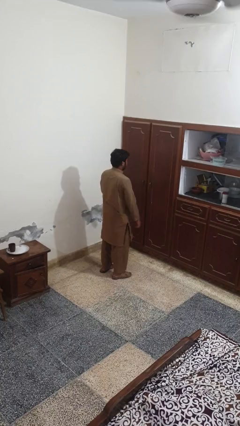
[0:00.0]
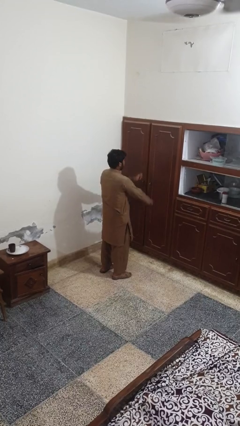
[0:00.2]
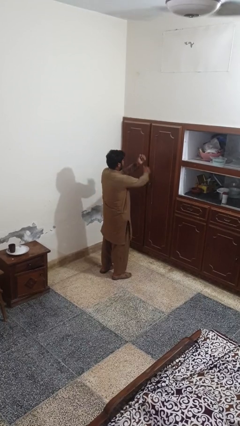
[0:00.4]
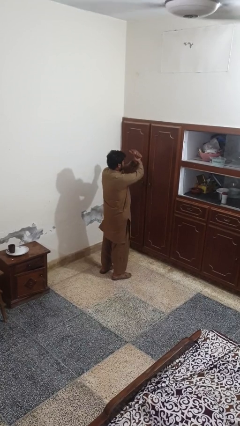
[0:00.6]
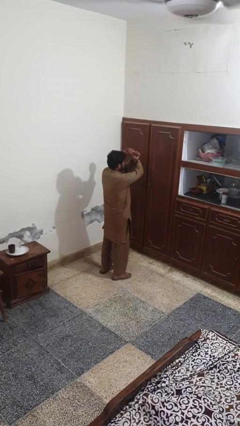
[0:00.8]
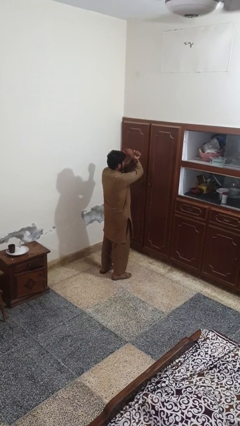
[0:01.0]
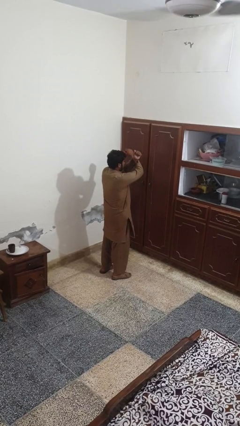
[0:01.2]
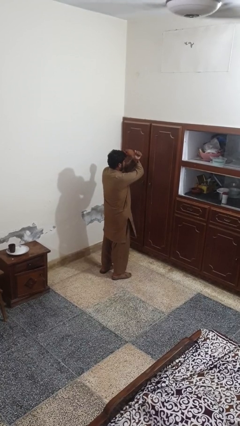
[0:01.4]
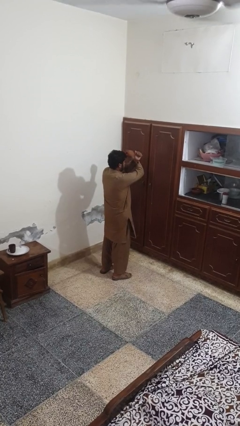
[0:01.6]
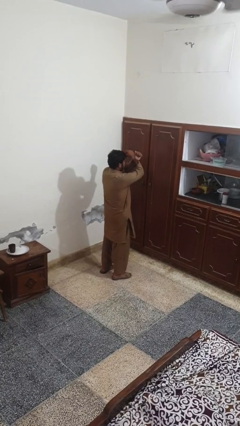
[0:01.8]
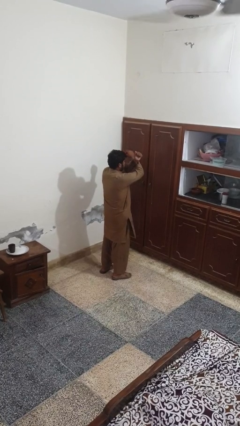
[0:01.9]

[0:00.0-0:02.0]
person gestures arms x

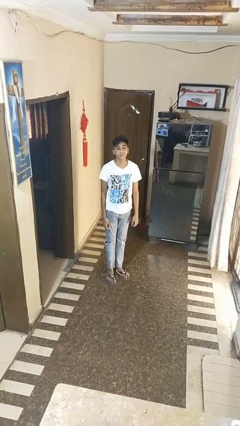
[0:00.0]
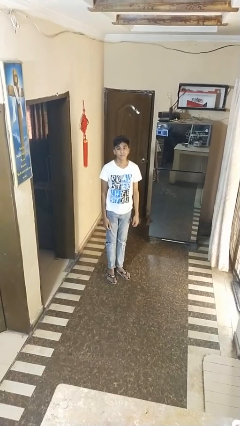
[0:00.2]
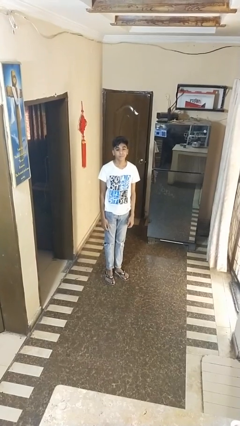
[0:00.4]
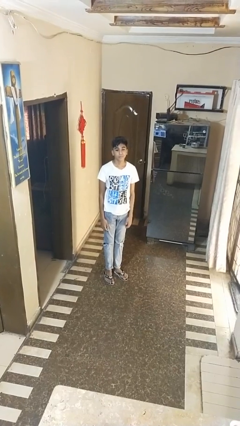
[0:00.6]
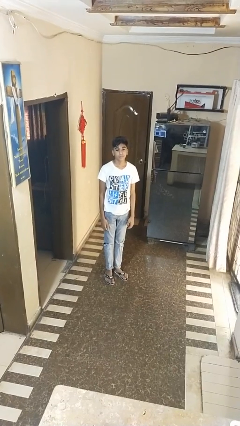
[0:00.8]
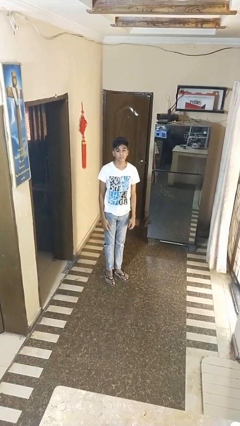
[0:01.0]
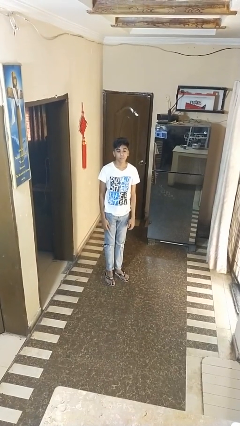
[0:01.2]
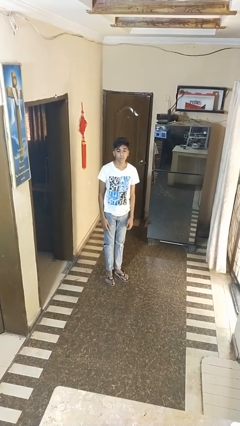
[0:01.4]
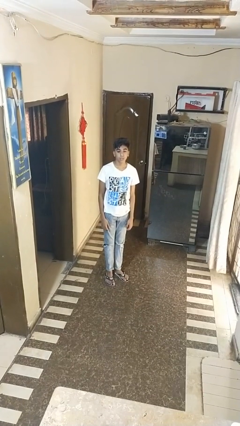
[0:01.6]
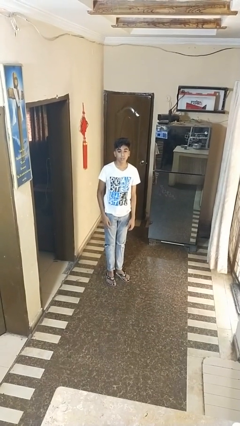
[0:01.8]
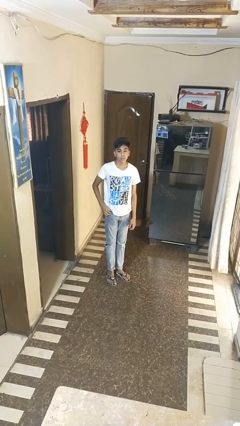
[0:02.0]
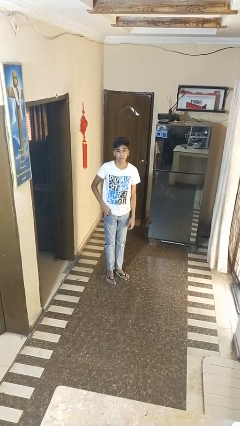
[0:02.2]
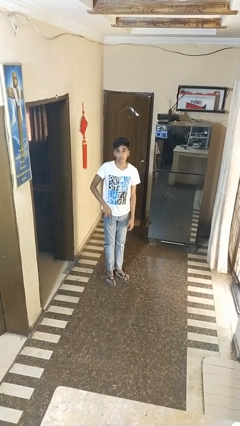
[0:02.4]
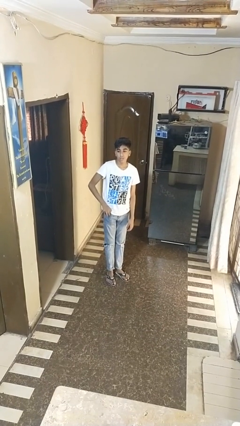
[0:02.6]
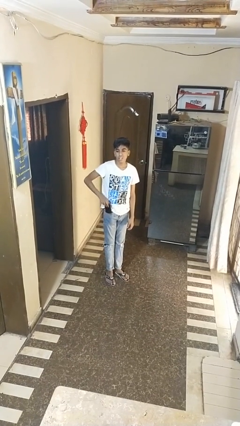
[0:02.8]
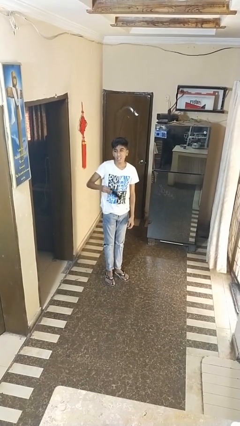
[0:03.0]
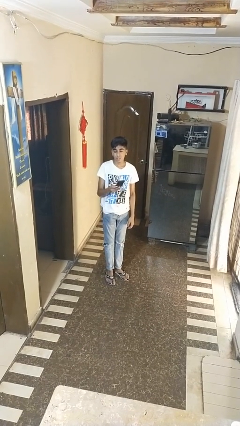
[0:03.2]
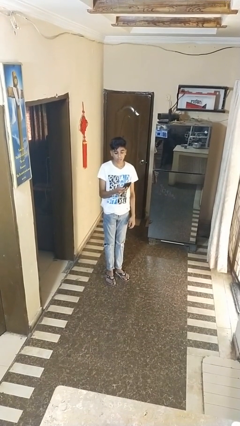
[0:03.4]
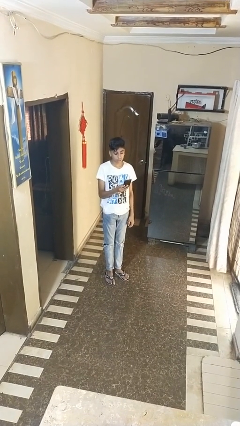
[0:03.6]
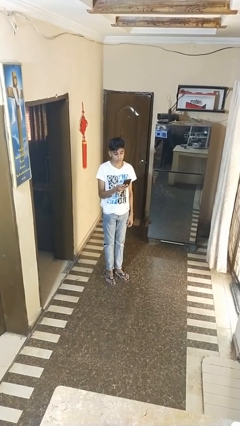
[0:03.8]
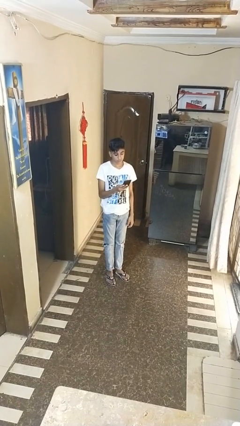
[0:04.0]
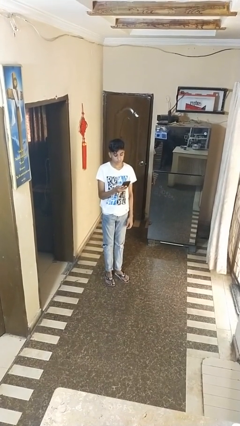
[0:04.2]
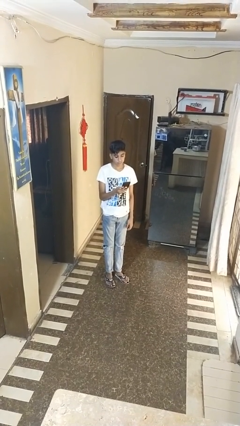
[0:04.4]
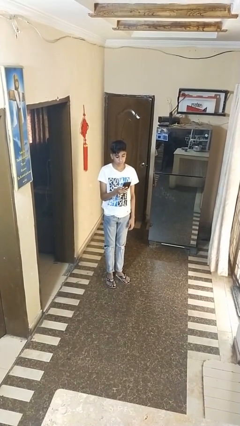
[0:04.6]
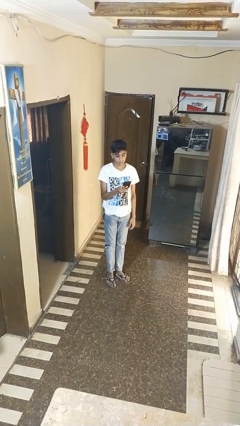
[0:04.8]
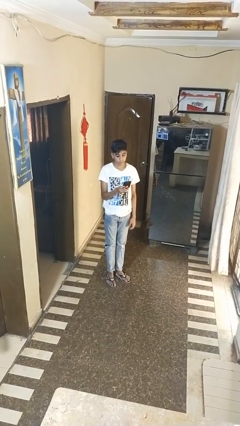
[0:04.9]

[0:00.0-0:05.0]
person takes phone from pocket

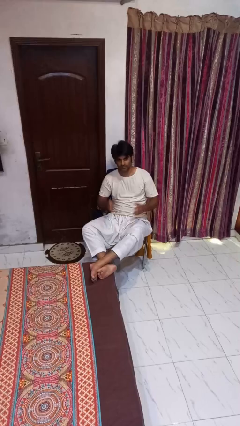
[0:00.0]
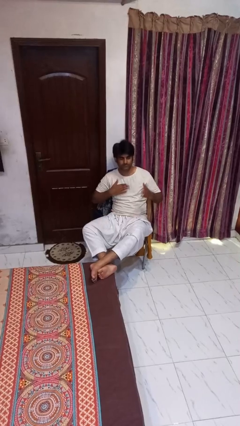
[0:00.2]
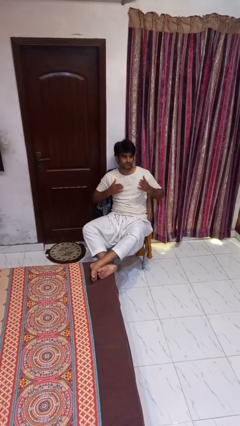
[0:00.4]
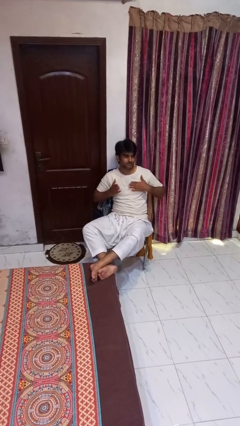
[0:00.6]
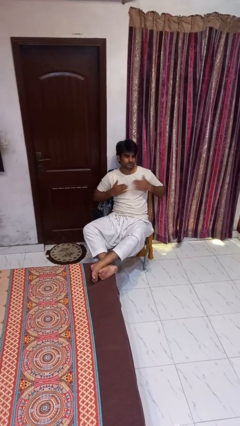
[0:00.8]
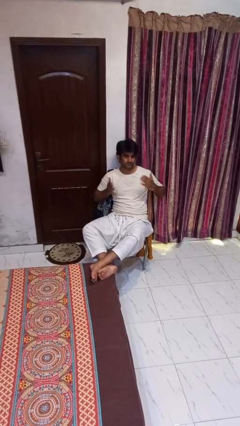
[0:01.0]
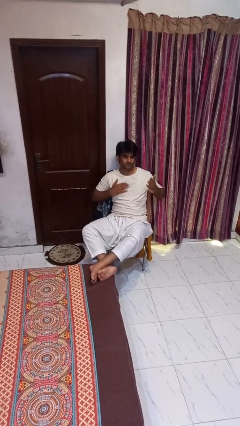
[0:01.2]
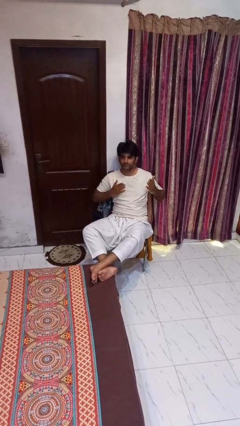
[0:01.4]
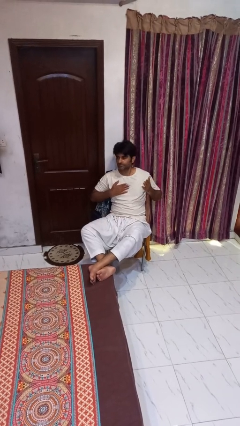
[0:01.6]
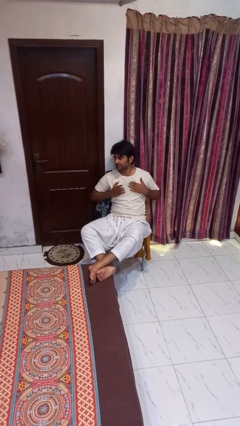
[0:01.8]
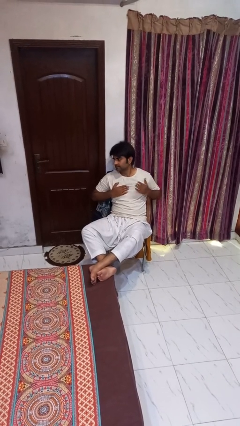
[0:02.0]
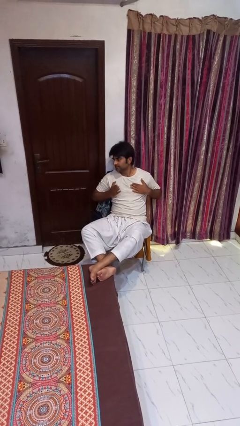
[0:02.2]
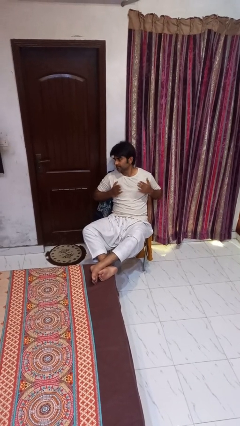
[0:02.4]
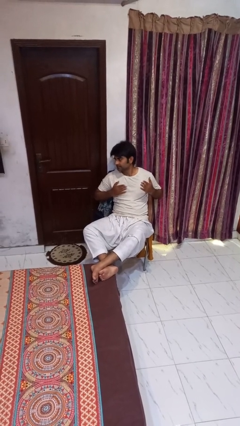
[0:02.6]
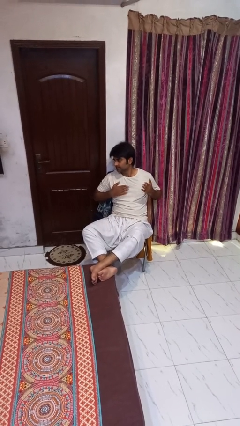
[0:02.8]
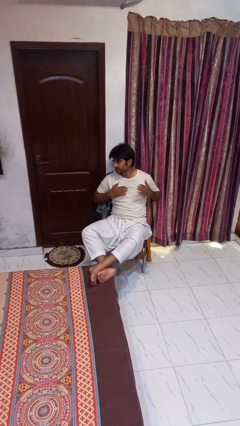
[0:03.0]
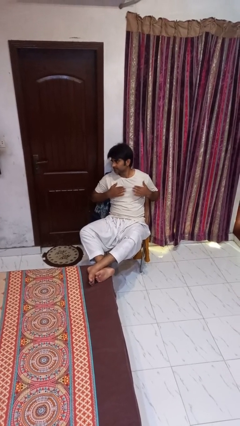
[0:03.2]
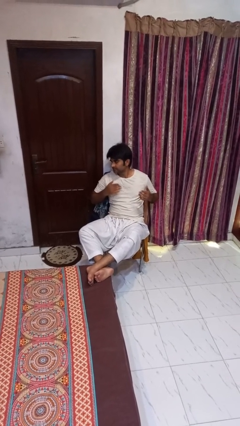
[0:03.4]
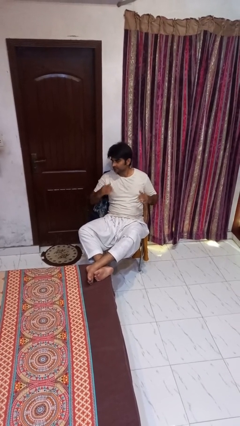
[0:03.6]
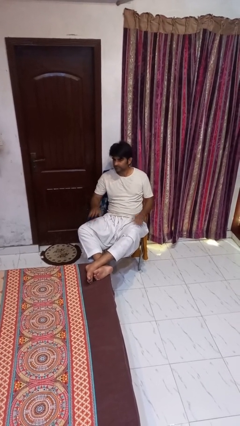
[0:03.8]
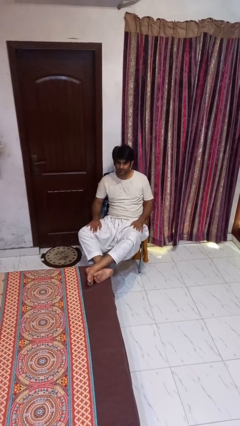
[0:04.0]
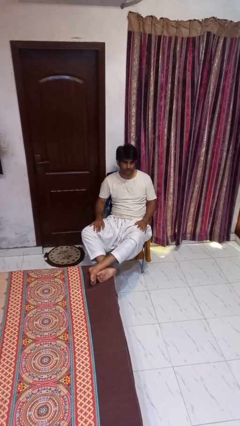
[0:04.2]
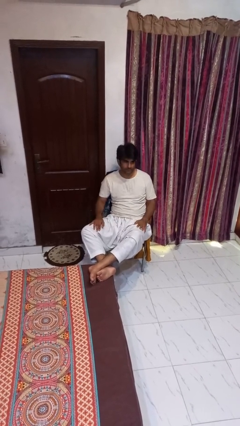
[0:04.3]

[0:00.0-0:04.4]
person drums on chest

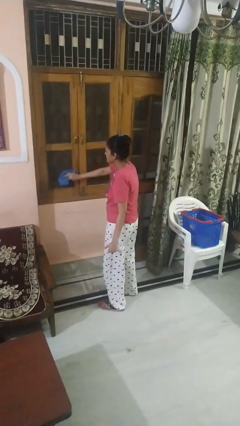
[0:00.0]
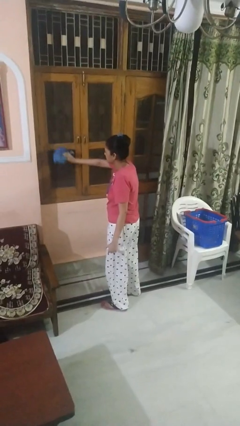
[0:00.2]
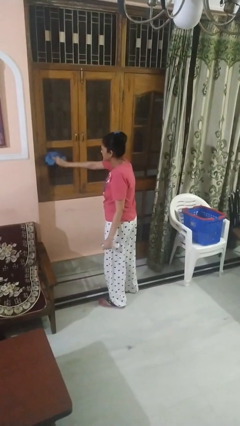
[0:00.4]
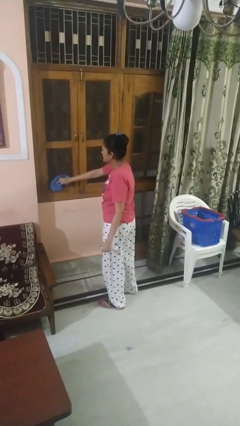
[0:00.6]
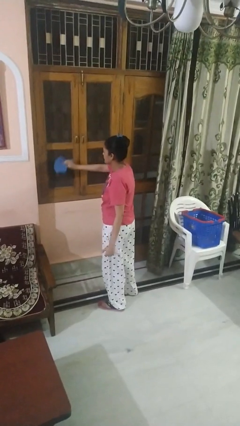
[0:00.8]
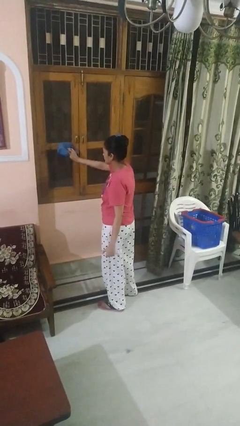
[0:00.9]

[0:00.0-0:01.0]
person washes window

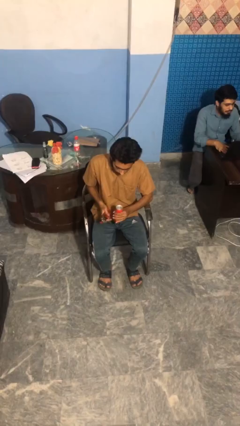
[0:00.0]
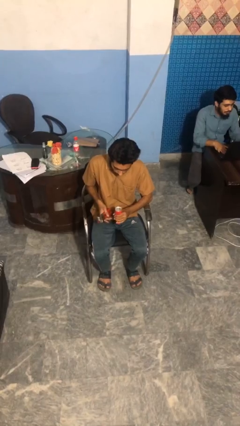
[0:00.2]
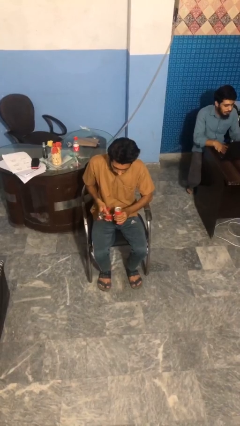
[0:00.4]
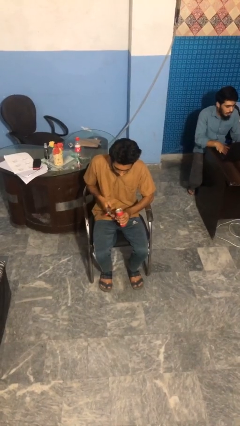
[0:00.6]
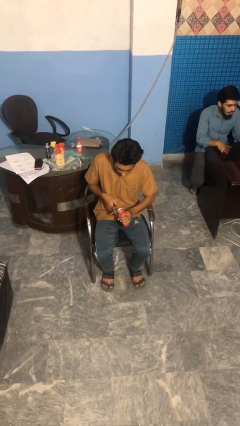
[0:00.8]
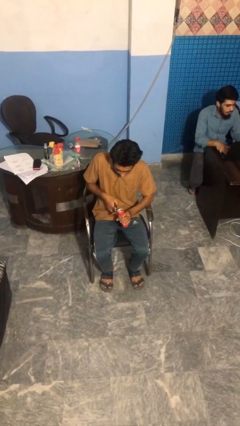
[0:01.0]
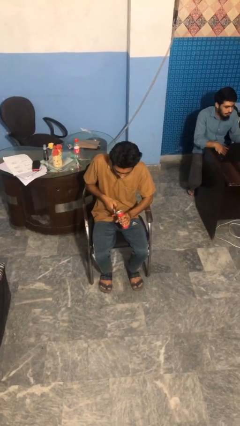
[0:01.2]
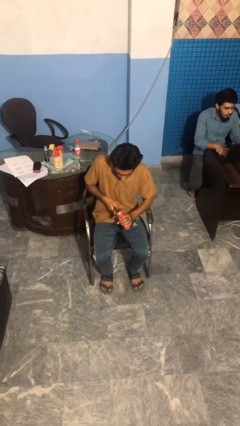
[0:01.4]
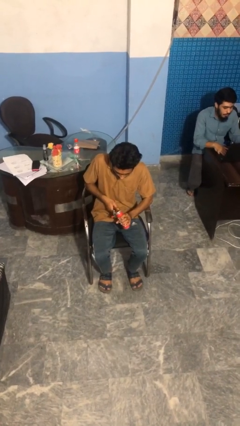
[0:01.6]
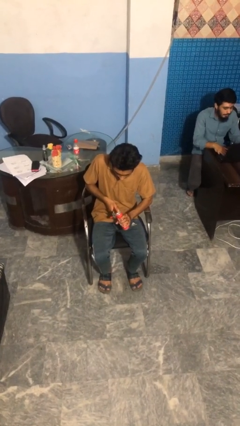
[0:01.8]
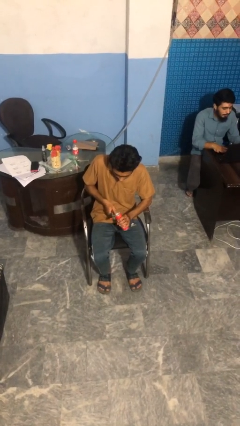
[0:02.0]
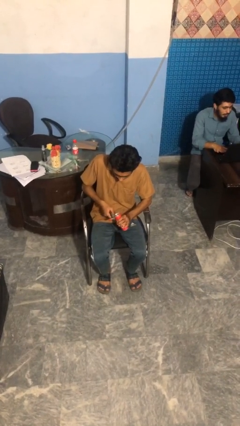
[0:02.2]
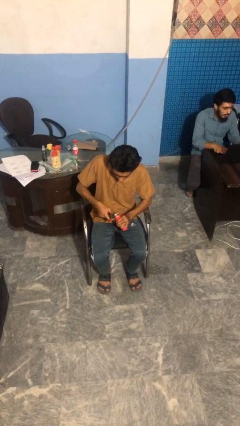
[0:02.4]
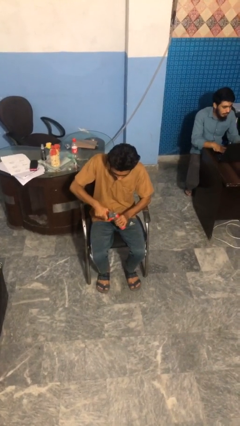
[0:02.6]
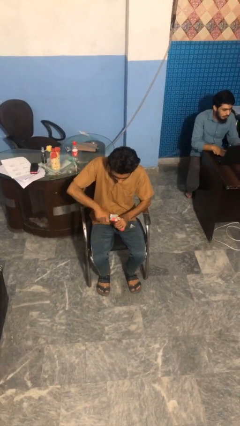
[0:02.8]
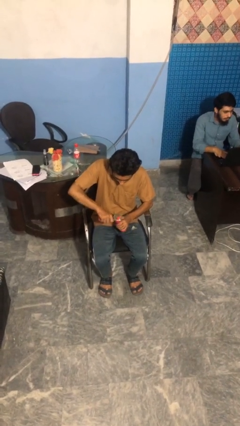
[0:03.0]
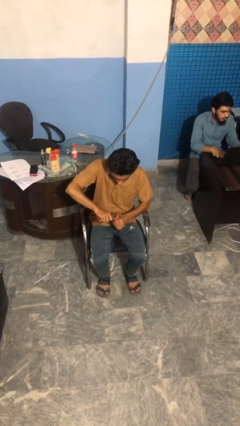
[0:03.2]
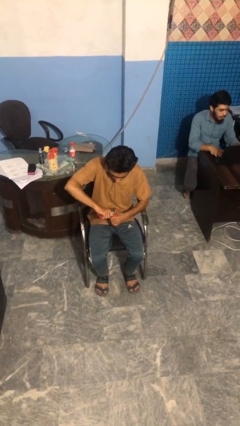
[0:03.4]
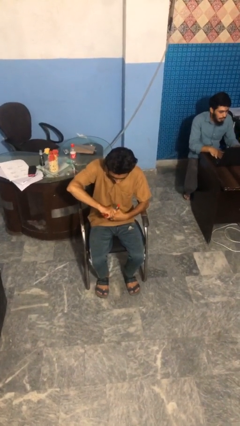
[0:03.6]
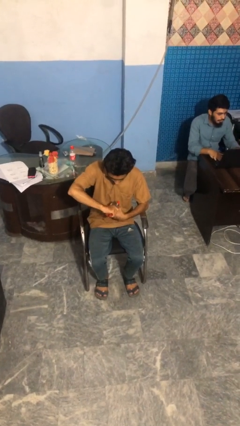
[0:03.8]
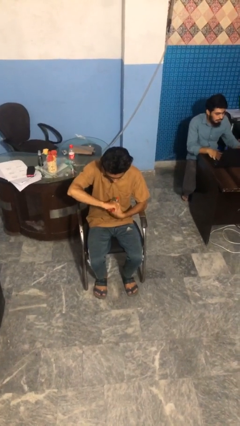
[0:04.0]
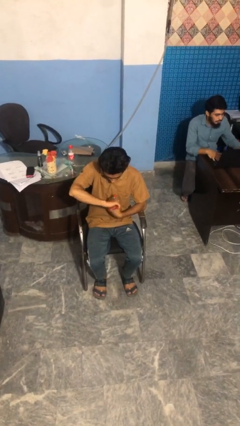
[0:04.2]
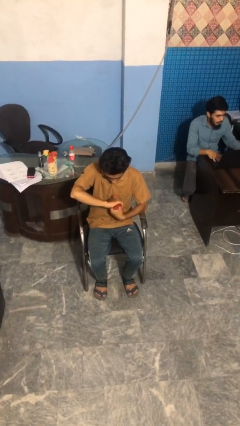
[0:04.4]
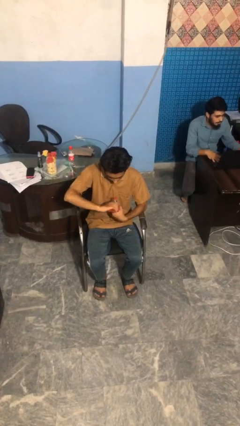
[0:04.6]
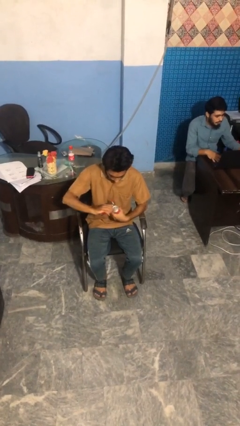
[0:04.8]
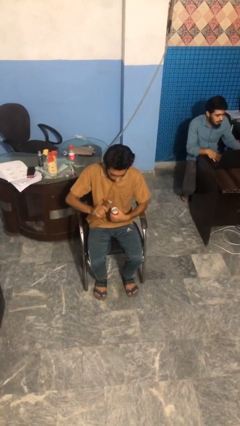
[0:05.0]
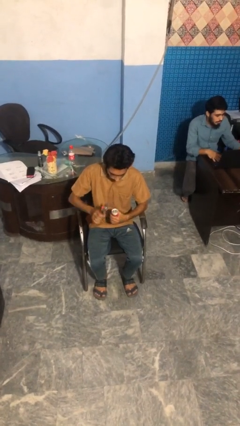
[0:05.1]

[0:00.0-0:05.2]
person opens can with can opener
